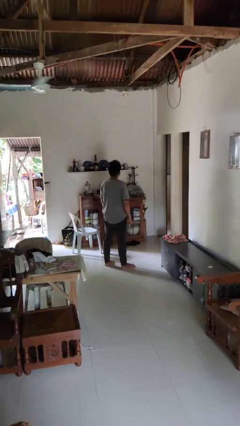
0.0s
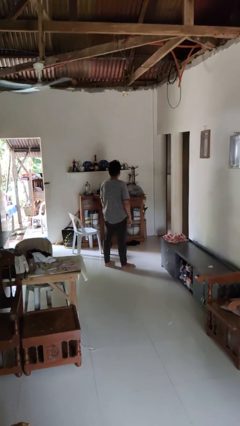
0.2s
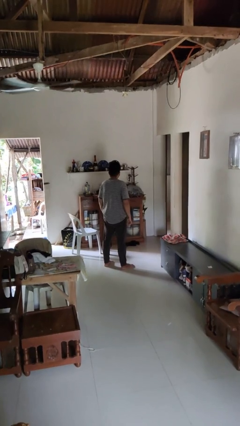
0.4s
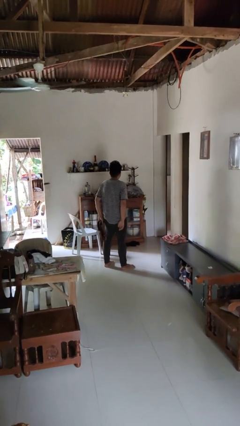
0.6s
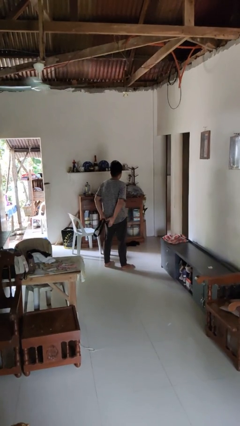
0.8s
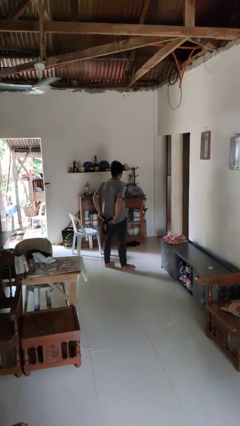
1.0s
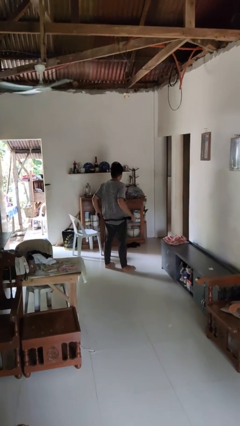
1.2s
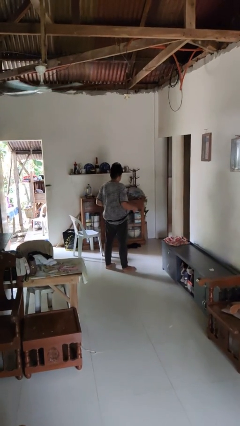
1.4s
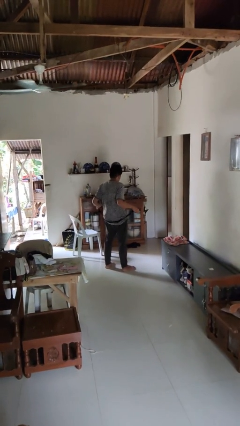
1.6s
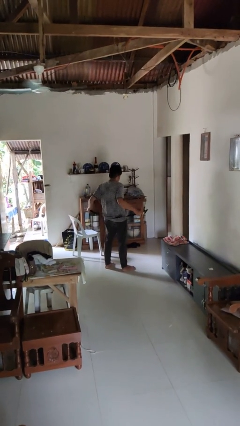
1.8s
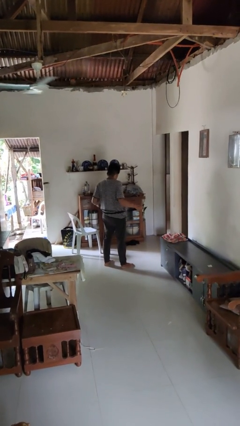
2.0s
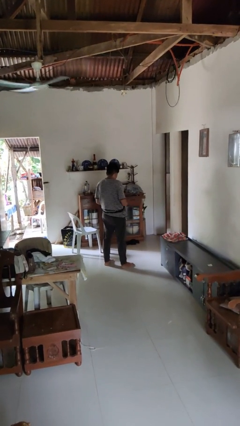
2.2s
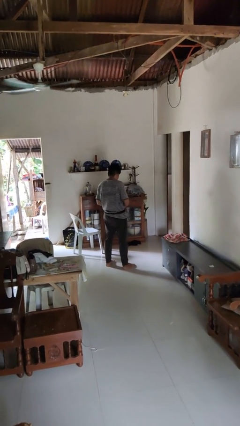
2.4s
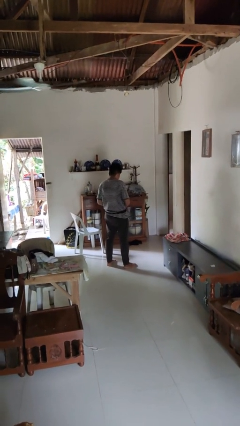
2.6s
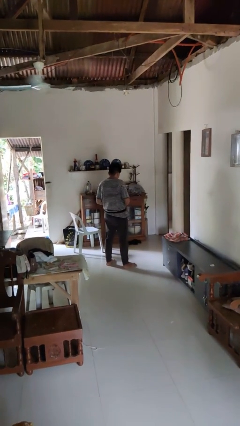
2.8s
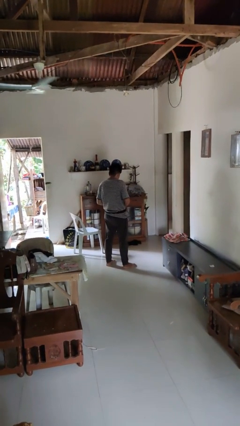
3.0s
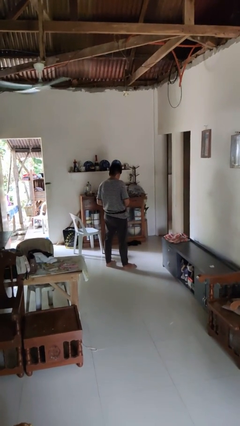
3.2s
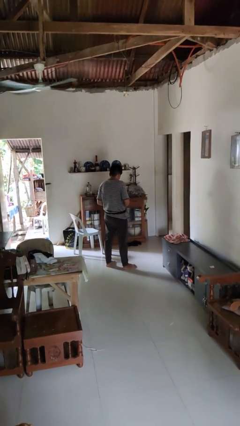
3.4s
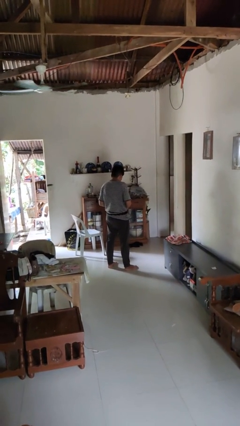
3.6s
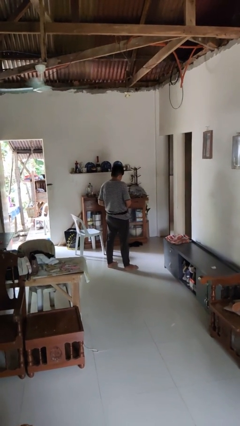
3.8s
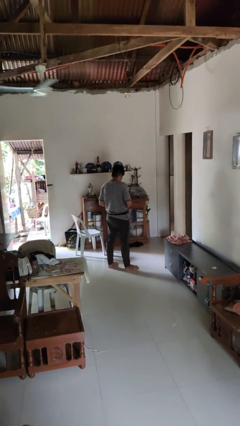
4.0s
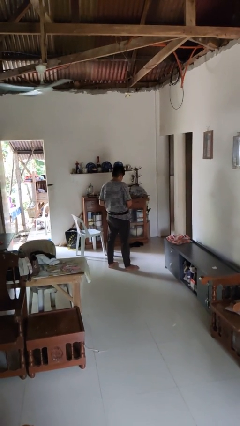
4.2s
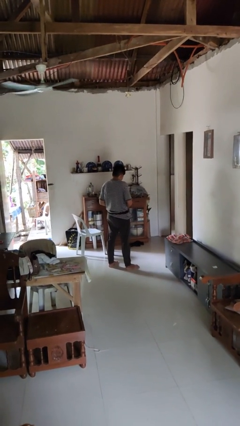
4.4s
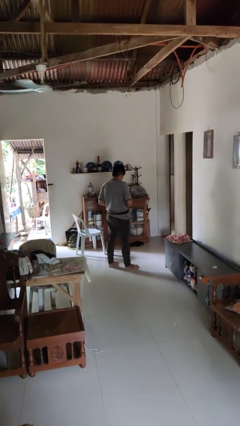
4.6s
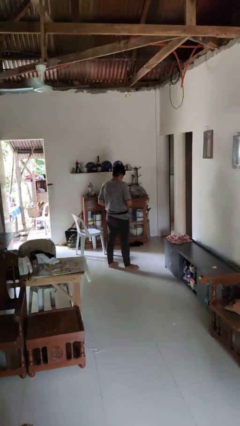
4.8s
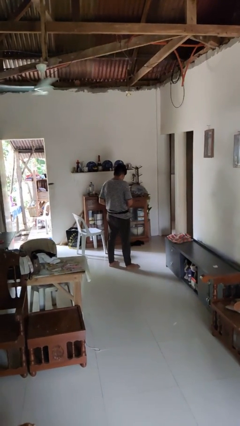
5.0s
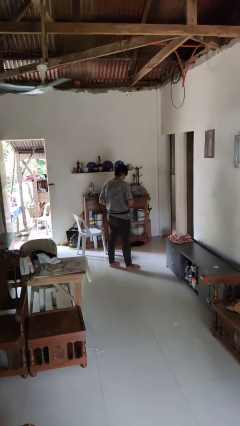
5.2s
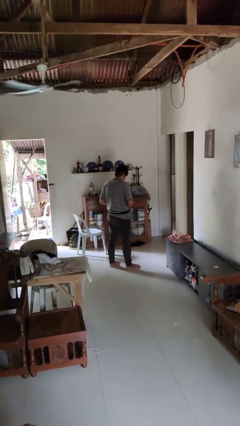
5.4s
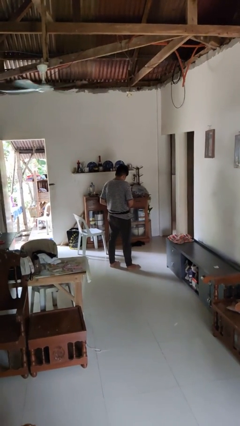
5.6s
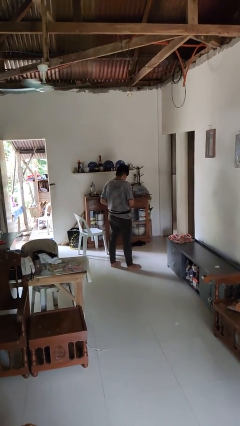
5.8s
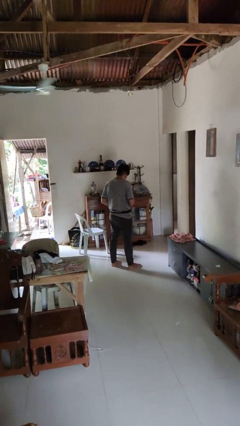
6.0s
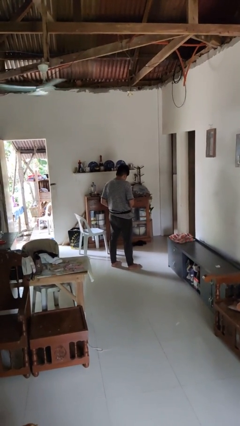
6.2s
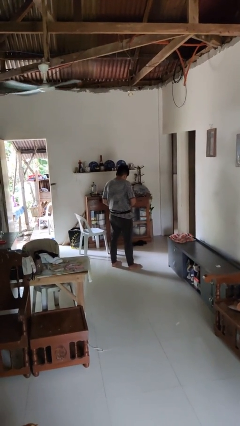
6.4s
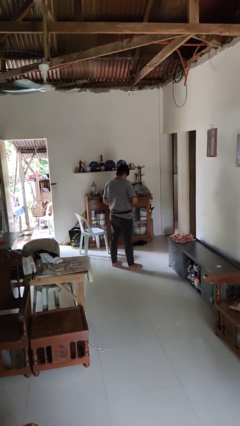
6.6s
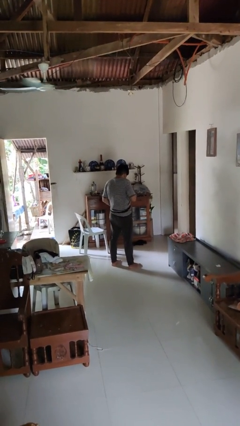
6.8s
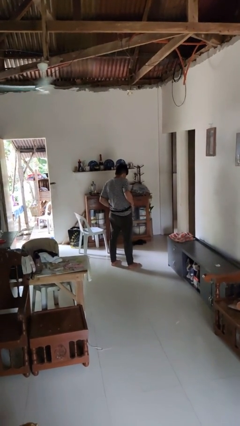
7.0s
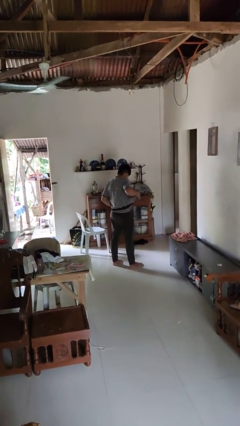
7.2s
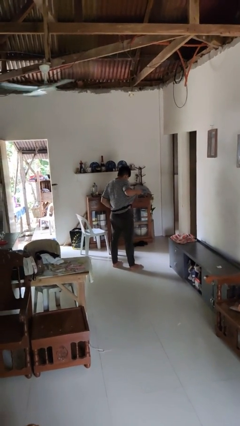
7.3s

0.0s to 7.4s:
person puts on belt

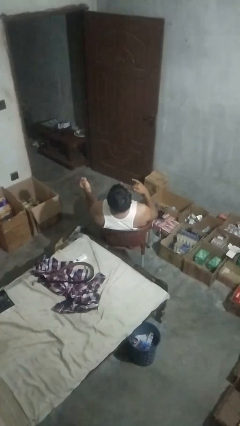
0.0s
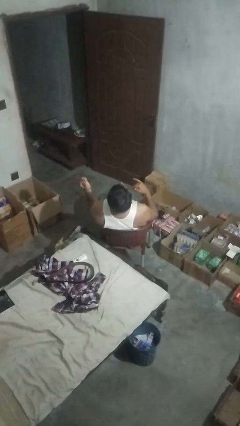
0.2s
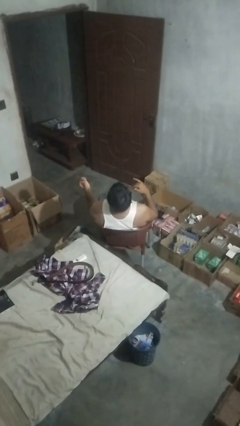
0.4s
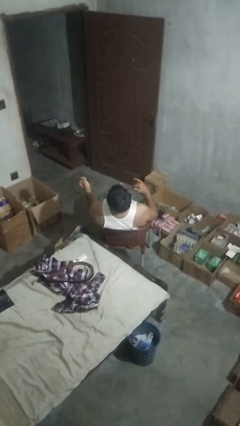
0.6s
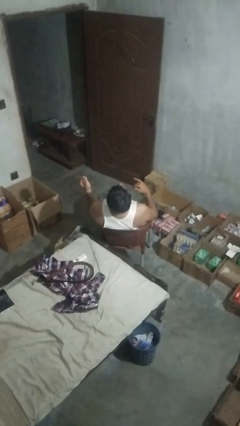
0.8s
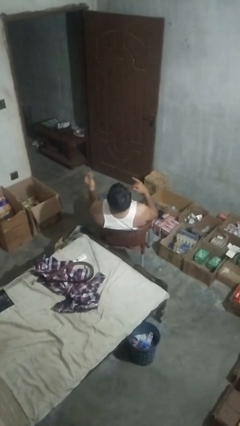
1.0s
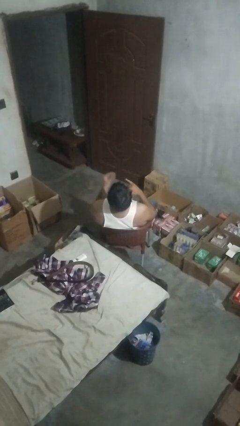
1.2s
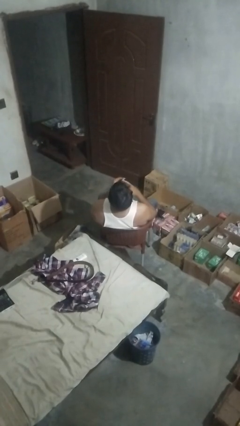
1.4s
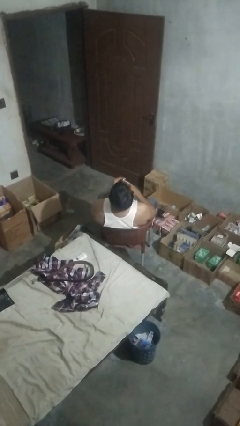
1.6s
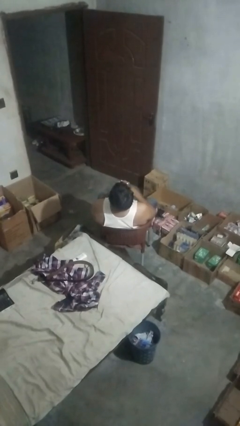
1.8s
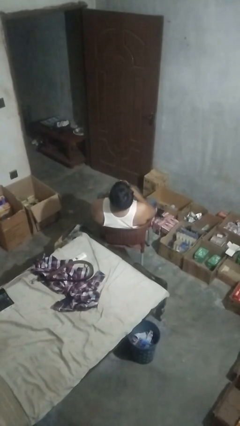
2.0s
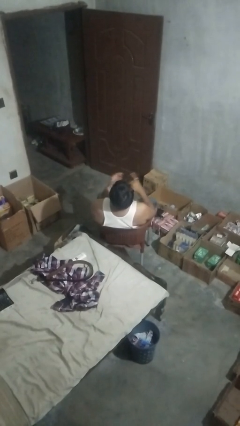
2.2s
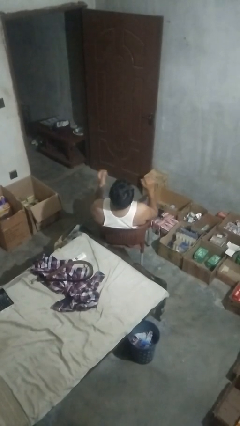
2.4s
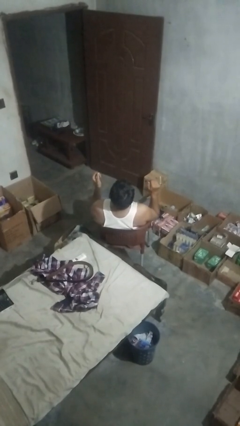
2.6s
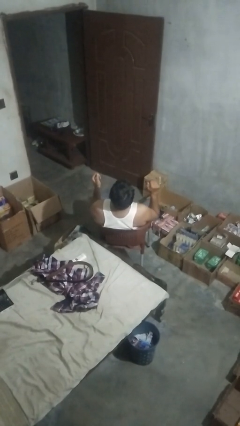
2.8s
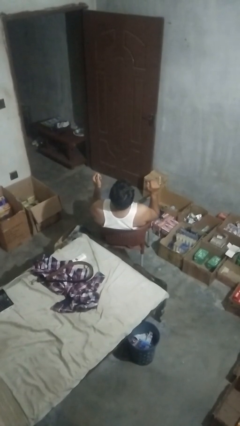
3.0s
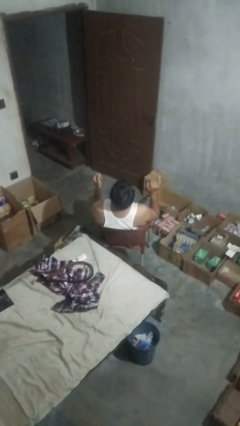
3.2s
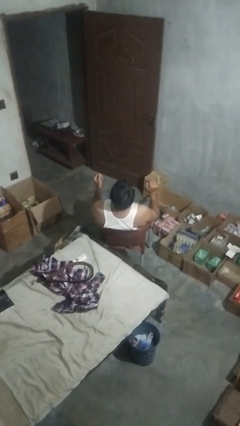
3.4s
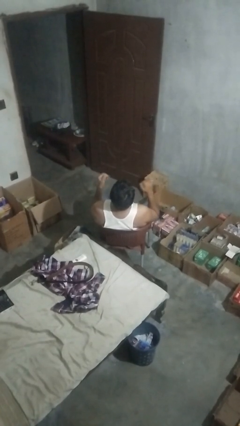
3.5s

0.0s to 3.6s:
person puts on ring

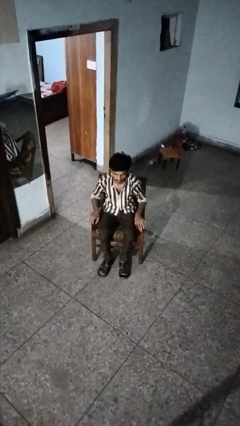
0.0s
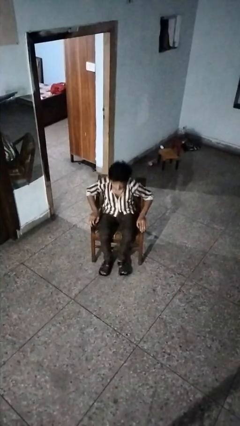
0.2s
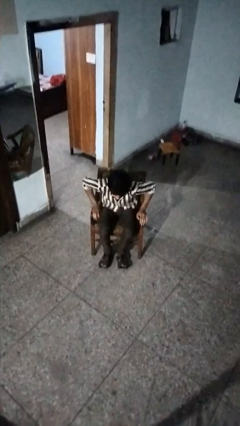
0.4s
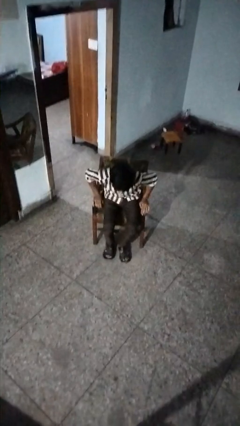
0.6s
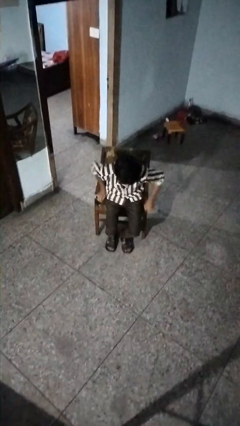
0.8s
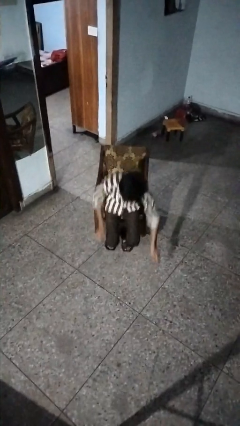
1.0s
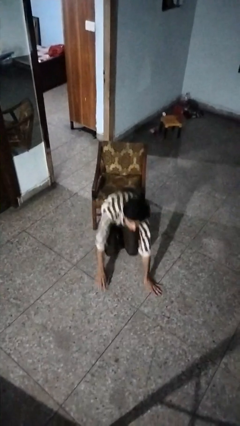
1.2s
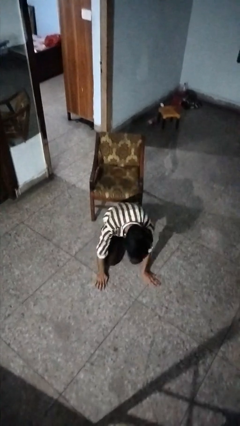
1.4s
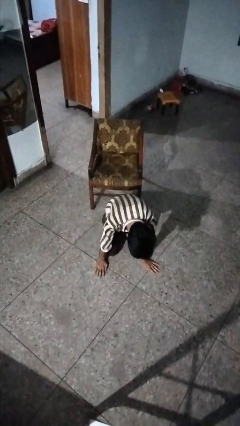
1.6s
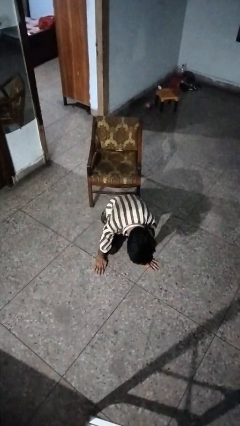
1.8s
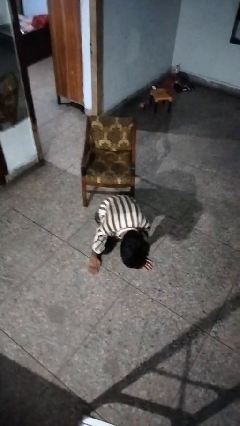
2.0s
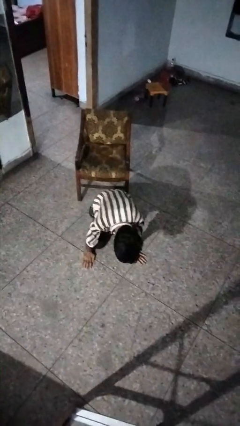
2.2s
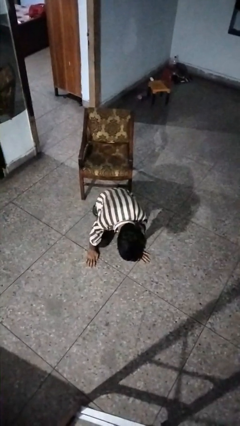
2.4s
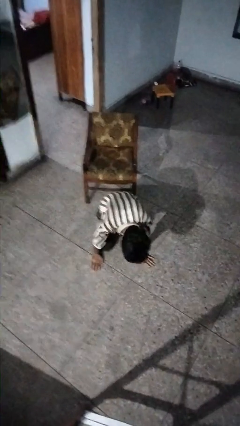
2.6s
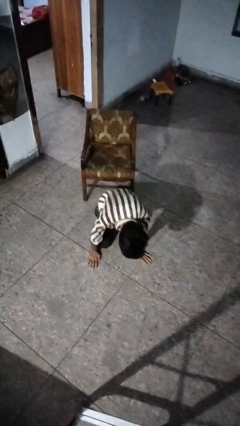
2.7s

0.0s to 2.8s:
person falls from chair

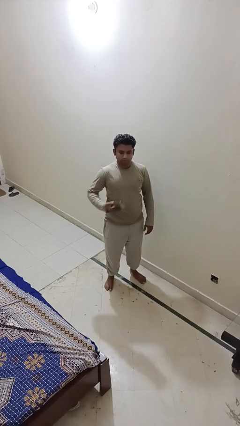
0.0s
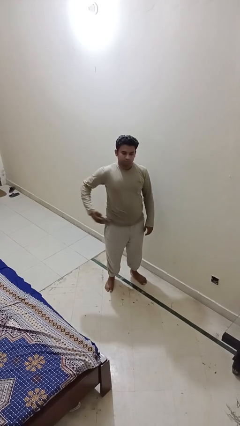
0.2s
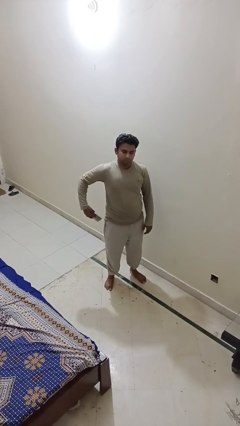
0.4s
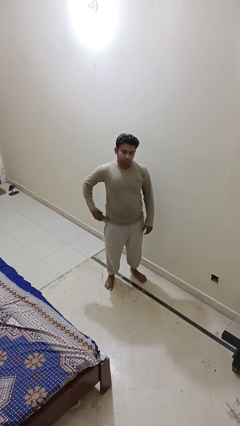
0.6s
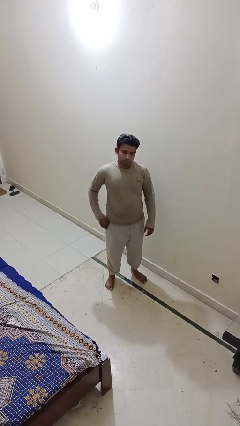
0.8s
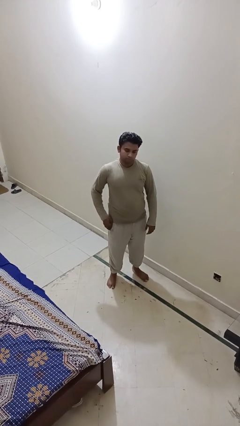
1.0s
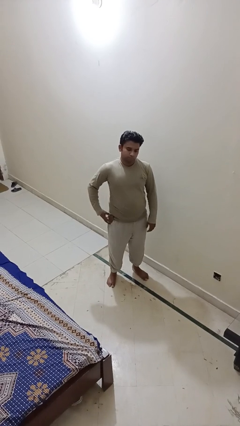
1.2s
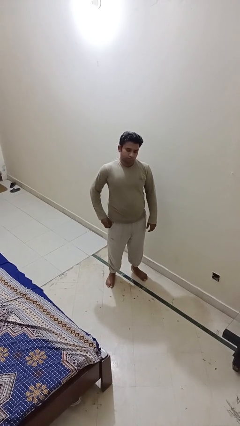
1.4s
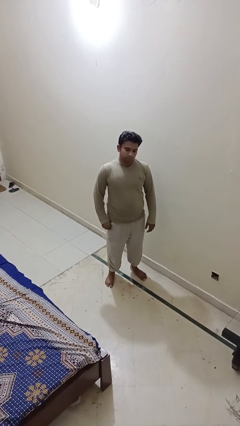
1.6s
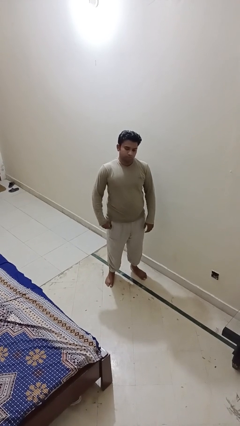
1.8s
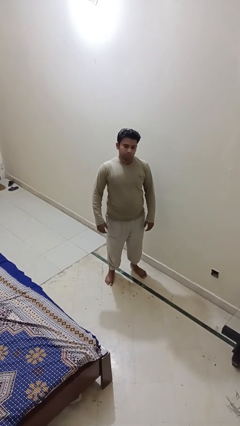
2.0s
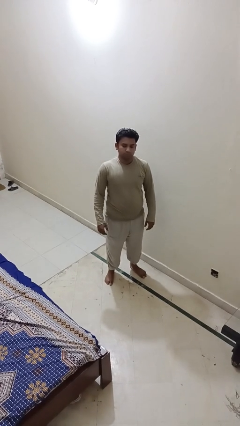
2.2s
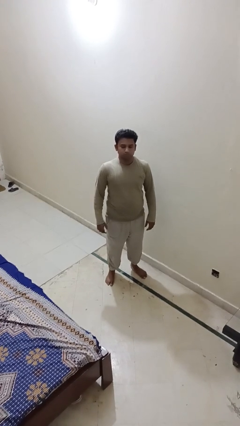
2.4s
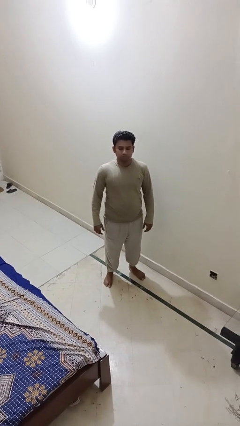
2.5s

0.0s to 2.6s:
person puts phone into pocket

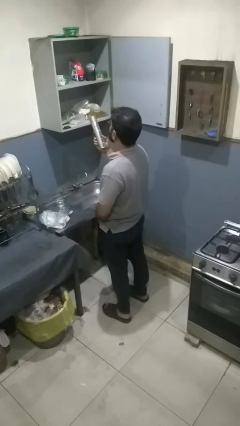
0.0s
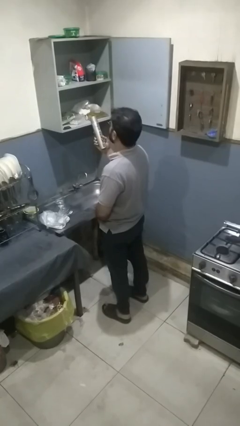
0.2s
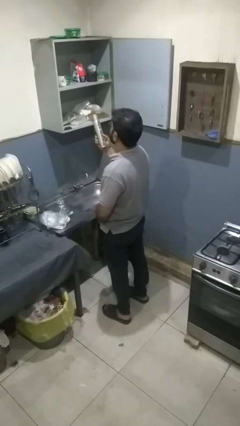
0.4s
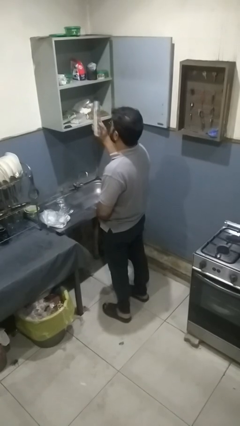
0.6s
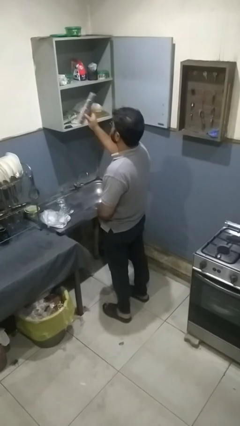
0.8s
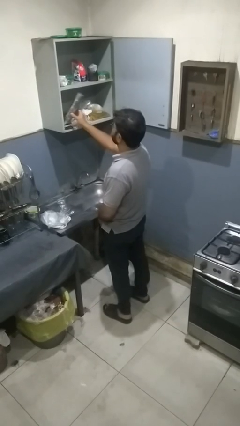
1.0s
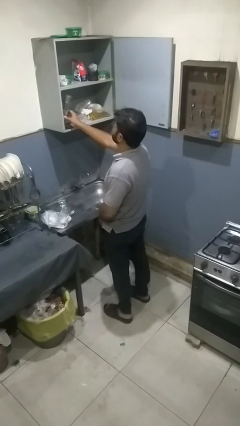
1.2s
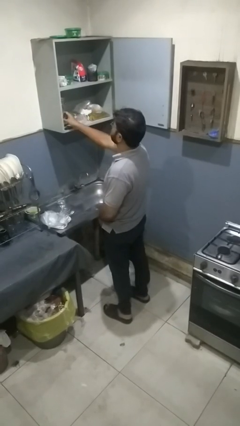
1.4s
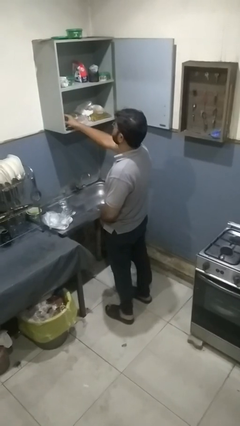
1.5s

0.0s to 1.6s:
person puts down object into cabinet
